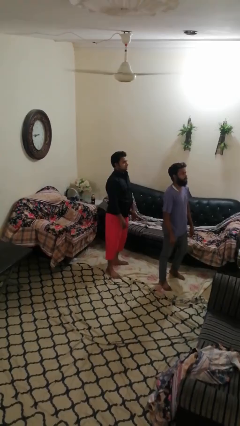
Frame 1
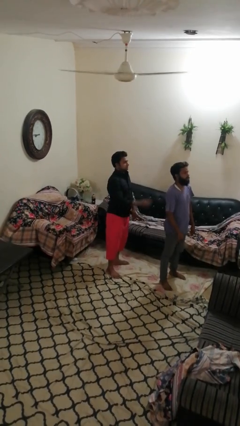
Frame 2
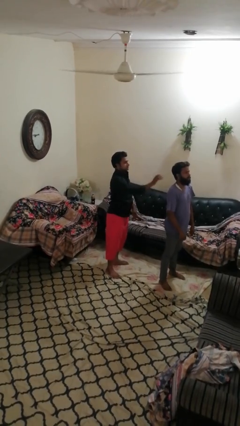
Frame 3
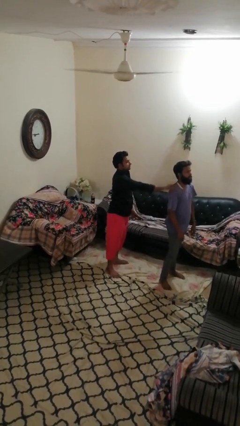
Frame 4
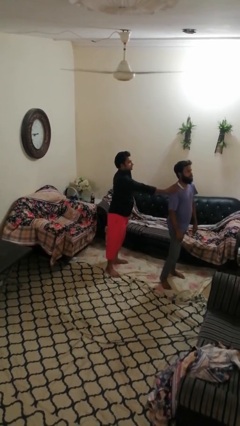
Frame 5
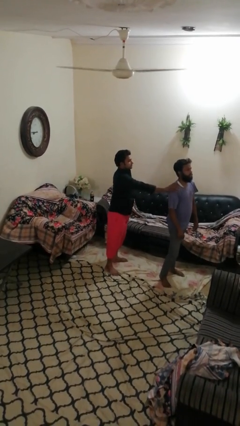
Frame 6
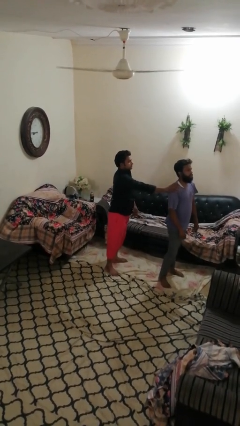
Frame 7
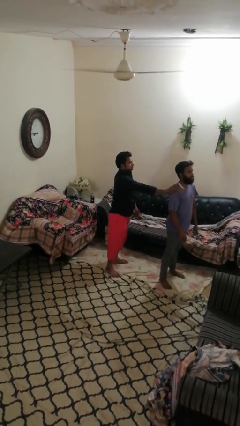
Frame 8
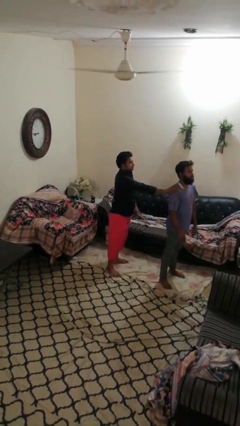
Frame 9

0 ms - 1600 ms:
person grabs person by shoulder

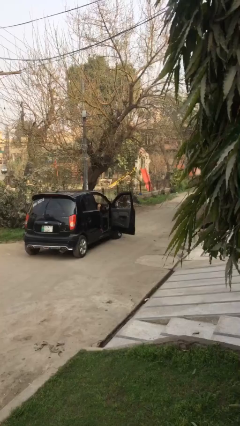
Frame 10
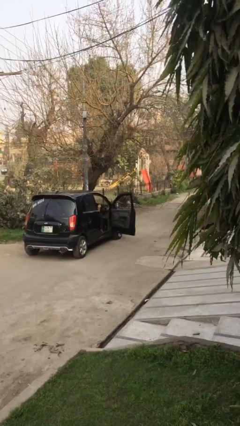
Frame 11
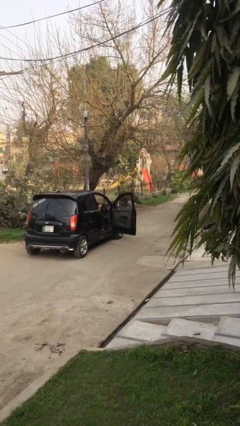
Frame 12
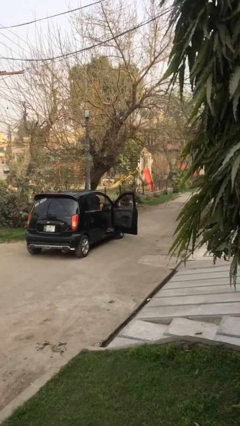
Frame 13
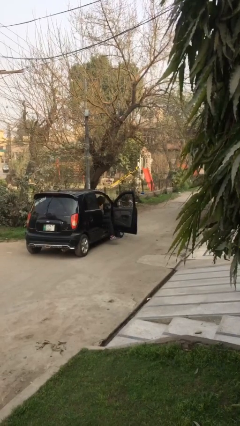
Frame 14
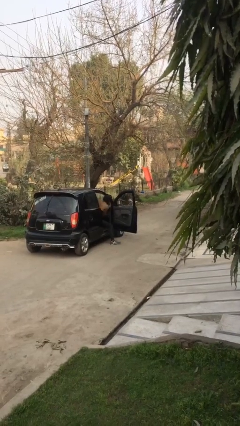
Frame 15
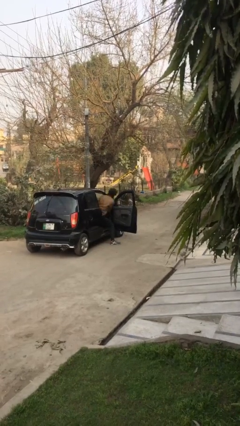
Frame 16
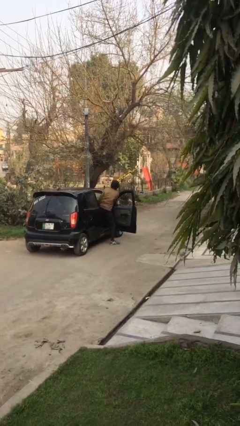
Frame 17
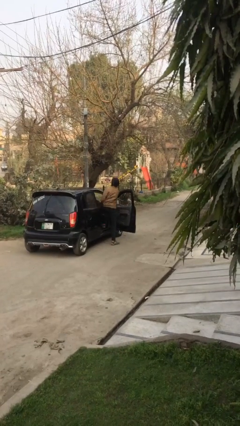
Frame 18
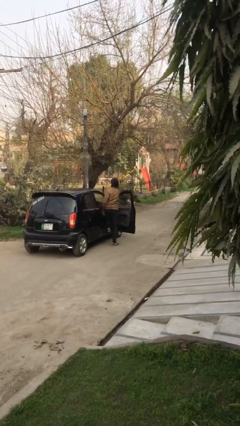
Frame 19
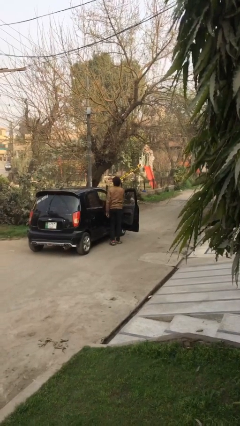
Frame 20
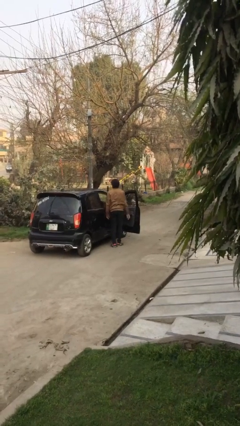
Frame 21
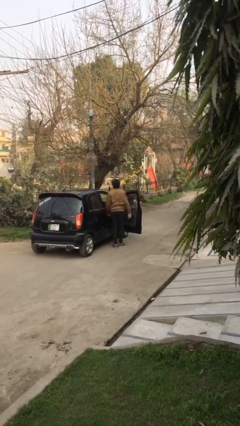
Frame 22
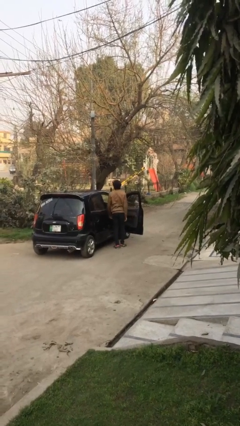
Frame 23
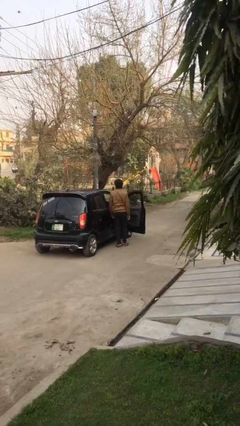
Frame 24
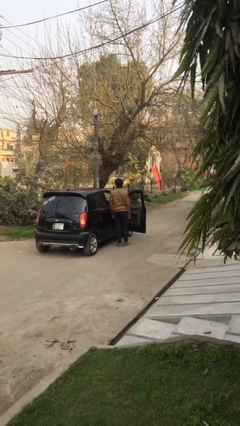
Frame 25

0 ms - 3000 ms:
person exits car

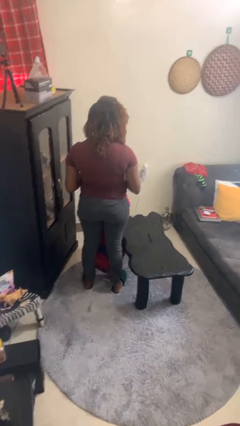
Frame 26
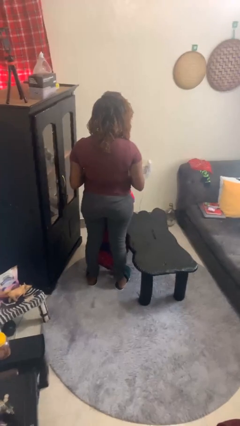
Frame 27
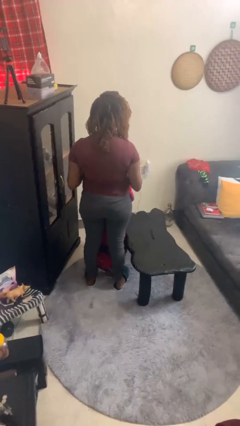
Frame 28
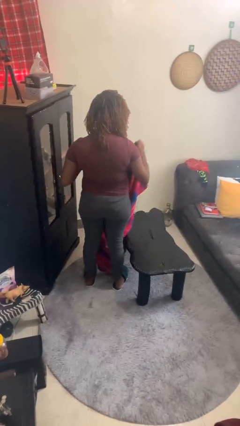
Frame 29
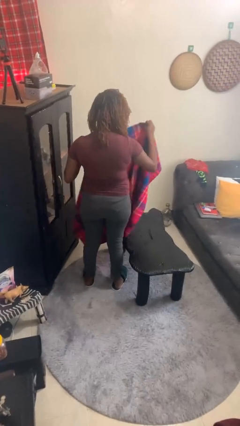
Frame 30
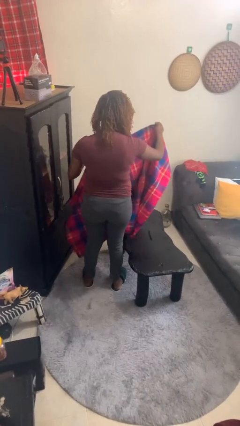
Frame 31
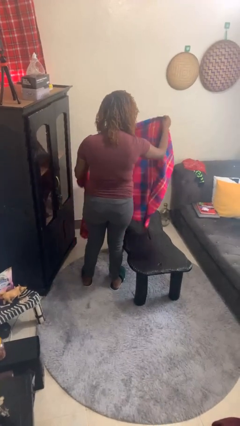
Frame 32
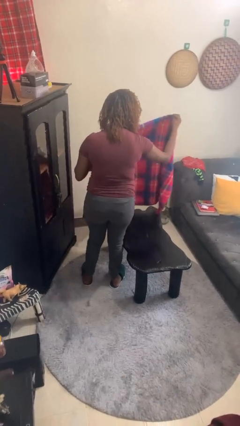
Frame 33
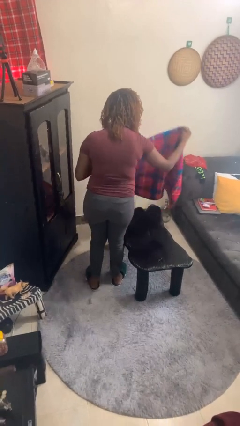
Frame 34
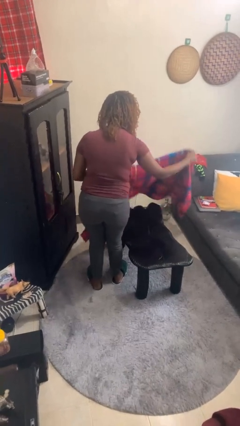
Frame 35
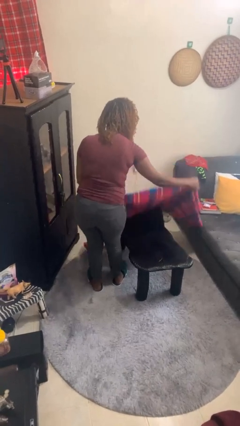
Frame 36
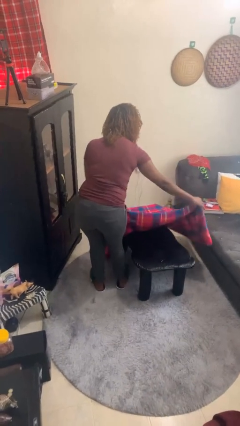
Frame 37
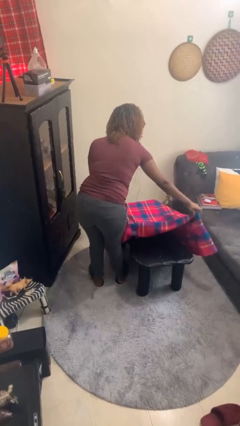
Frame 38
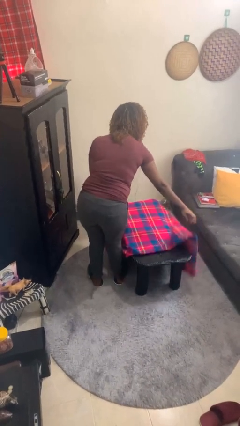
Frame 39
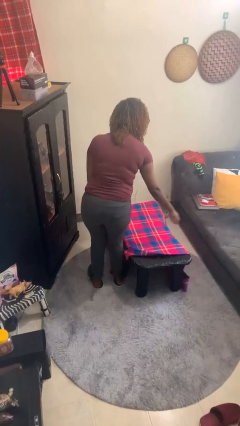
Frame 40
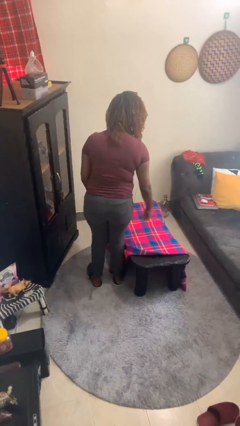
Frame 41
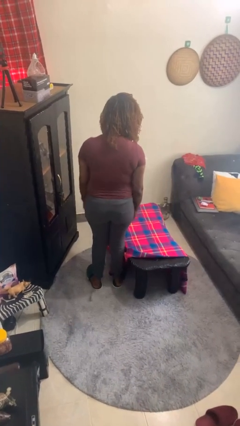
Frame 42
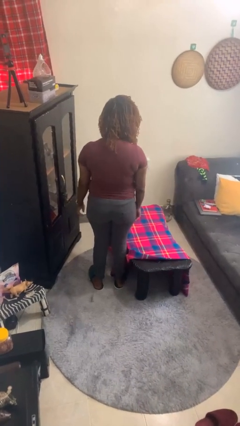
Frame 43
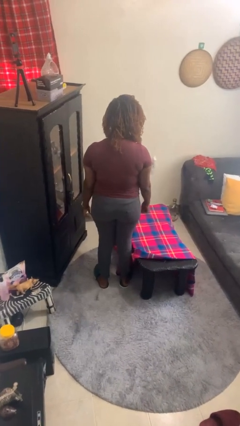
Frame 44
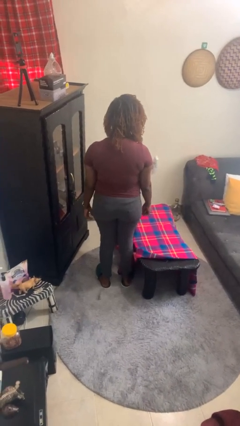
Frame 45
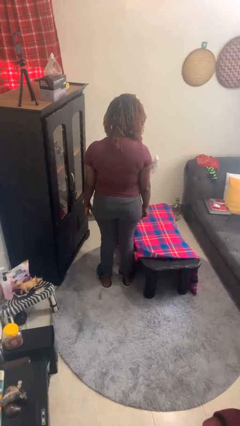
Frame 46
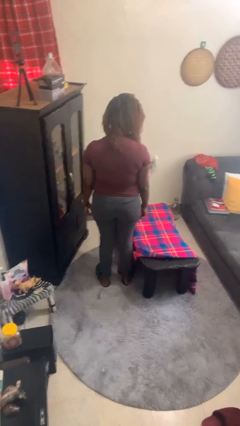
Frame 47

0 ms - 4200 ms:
person spreads tablecloth

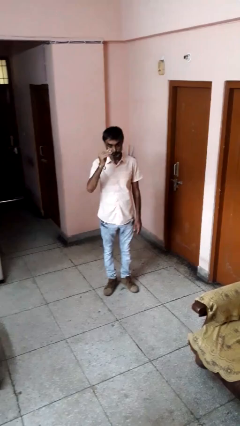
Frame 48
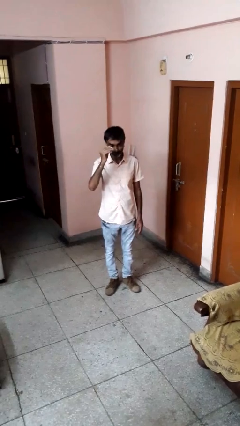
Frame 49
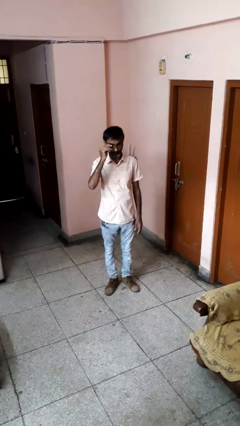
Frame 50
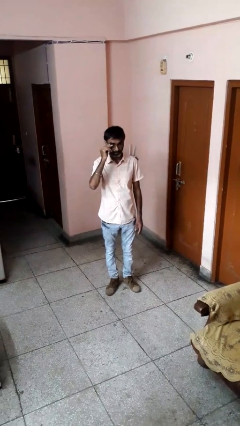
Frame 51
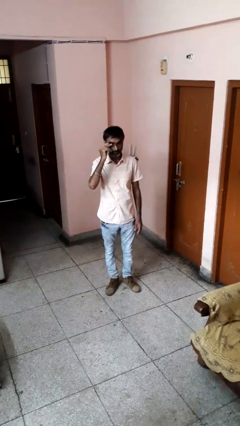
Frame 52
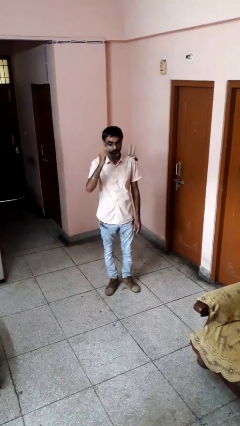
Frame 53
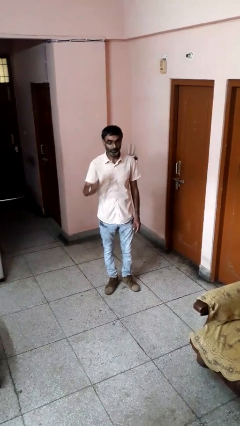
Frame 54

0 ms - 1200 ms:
person puts on glasses

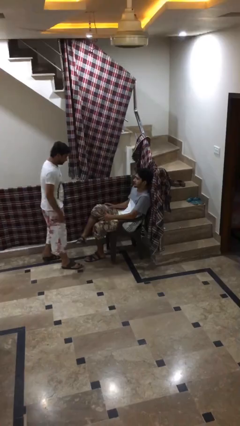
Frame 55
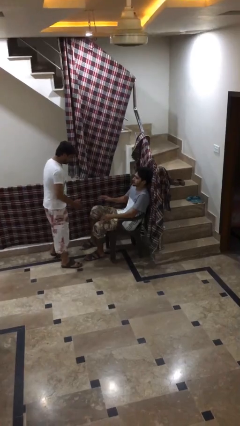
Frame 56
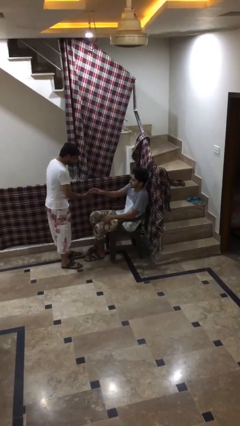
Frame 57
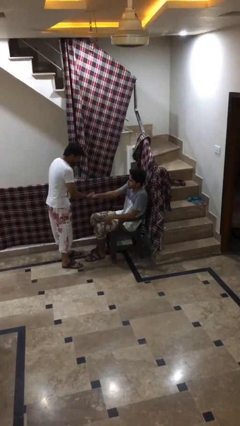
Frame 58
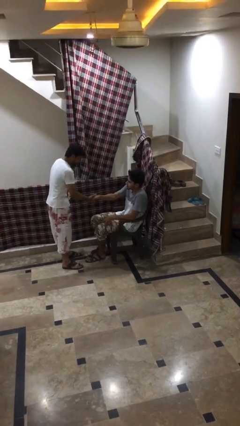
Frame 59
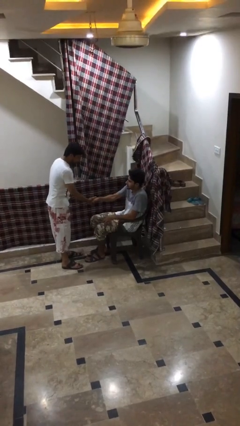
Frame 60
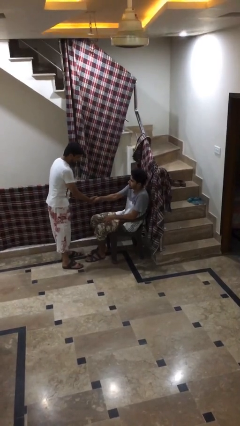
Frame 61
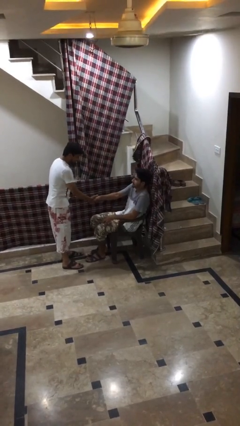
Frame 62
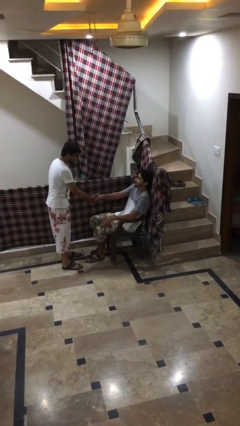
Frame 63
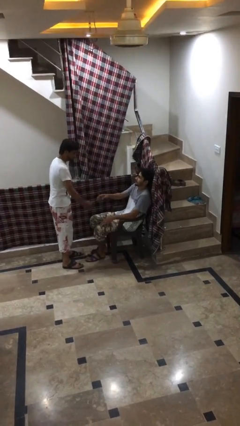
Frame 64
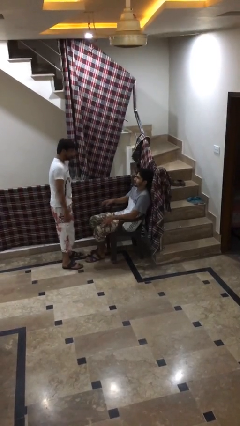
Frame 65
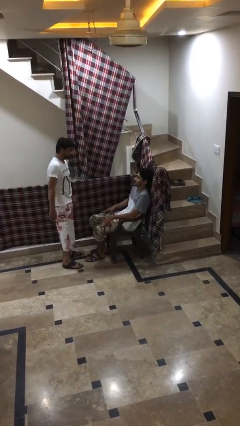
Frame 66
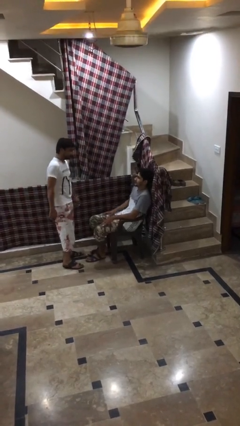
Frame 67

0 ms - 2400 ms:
person shakes hand

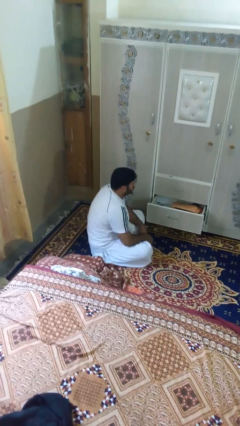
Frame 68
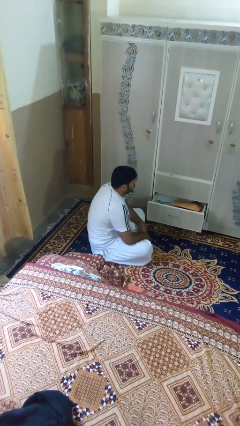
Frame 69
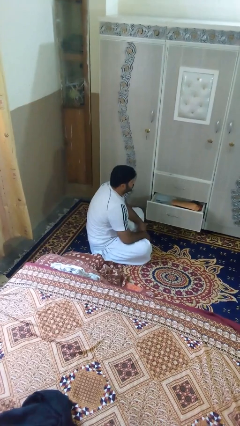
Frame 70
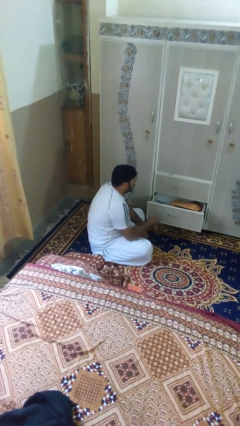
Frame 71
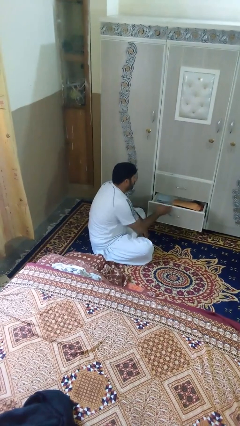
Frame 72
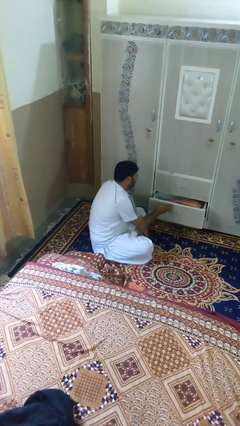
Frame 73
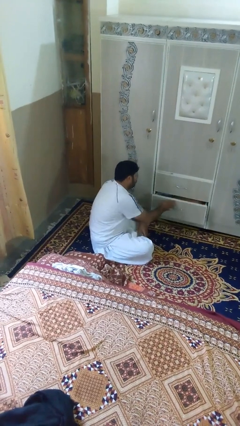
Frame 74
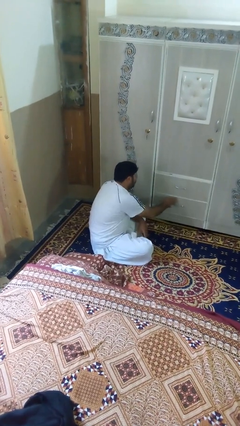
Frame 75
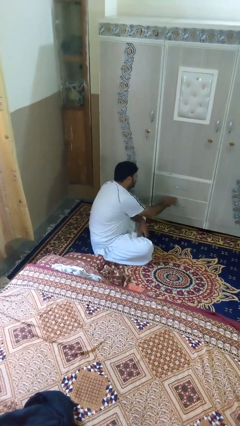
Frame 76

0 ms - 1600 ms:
person closes dresser drawer

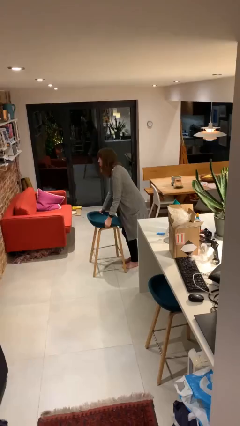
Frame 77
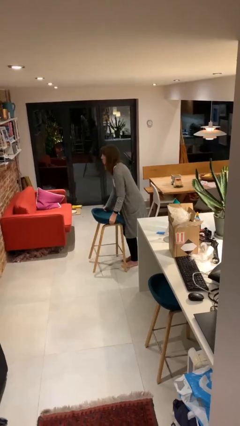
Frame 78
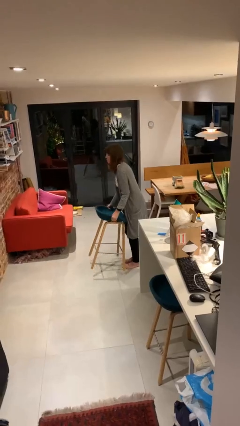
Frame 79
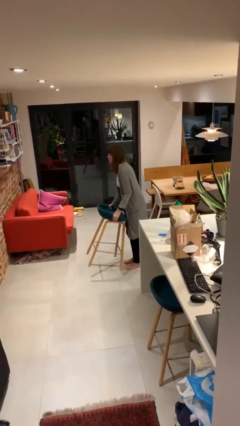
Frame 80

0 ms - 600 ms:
person picks up object from floor

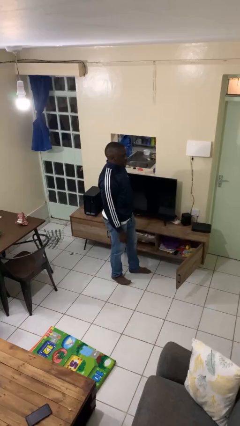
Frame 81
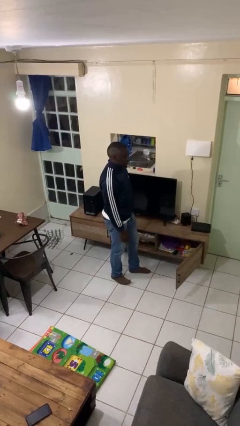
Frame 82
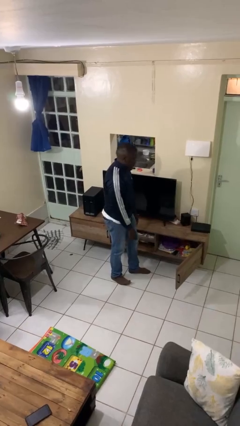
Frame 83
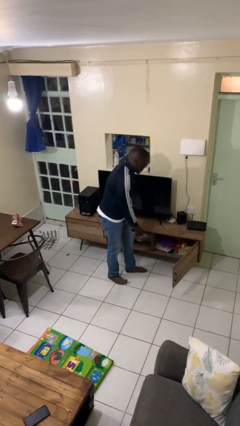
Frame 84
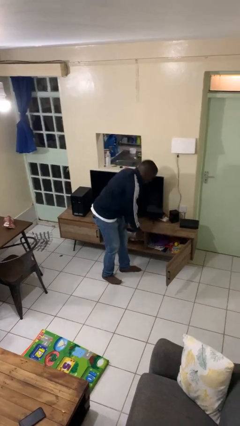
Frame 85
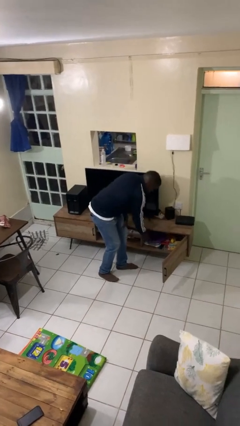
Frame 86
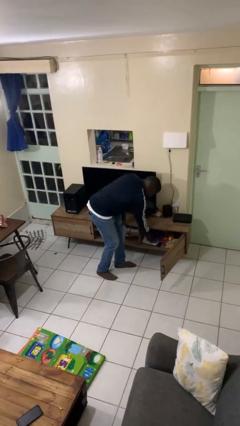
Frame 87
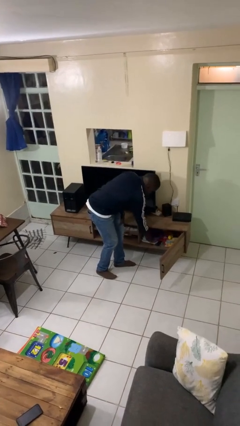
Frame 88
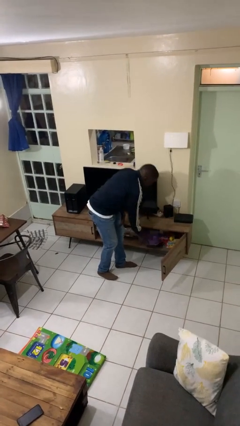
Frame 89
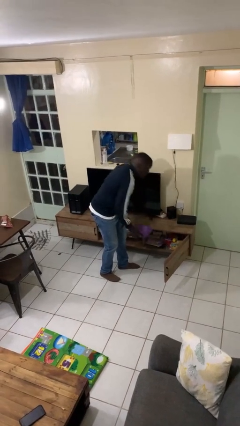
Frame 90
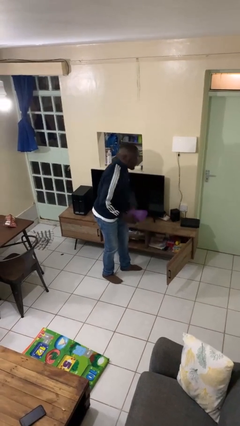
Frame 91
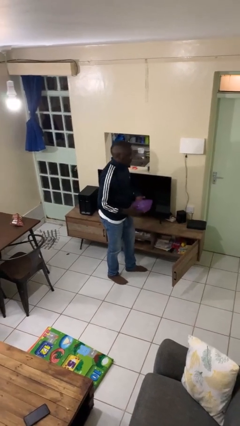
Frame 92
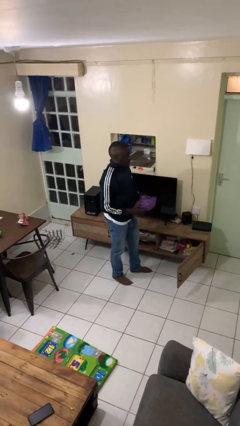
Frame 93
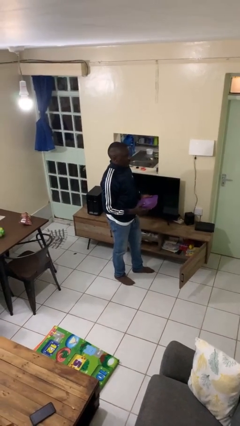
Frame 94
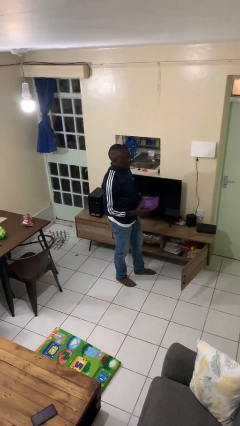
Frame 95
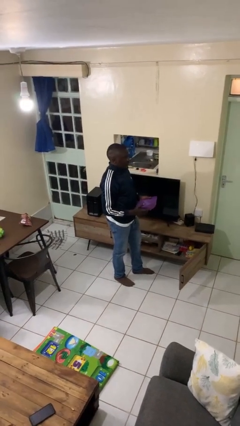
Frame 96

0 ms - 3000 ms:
person picks up object from cabinet
